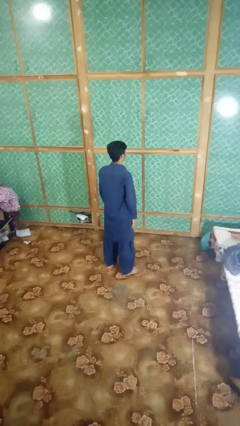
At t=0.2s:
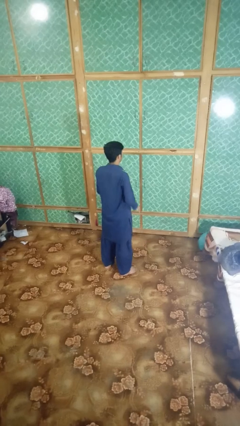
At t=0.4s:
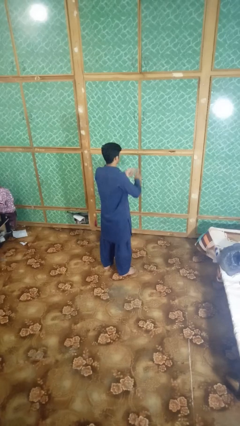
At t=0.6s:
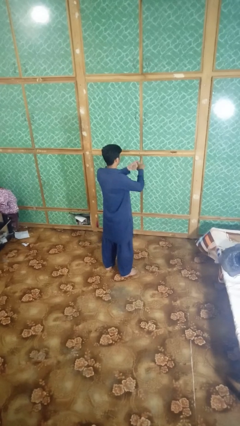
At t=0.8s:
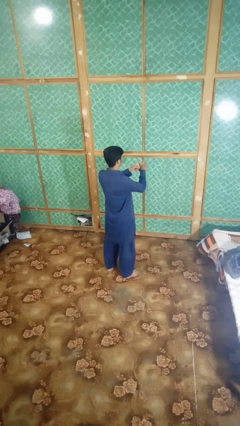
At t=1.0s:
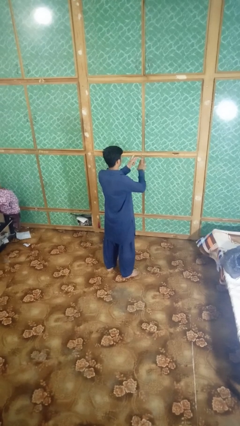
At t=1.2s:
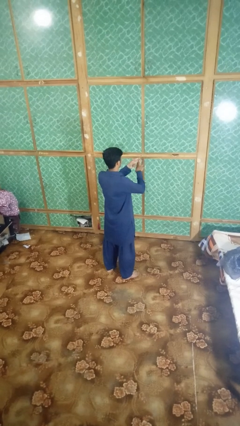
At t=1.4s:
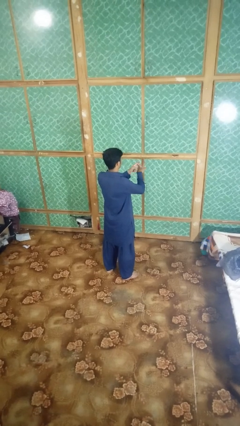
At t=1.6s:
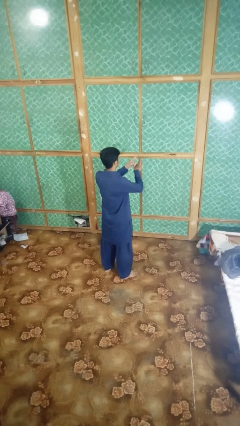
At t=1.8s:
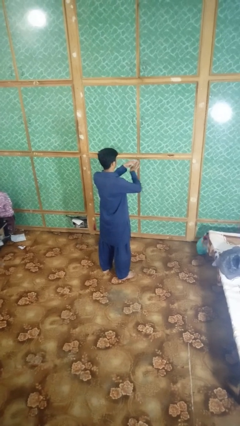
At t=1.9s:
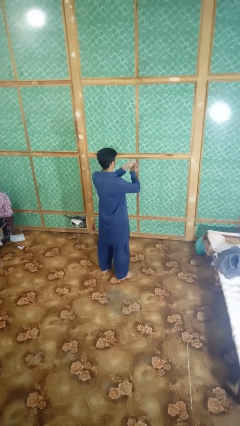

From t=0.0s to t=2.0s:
person snaps fingers

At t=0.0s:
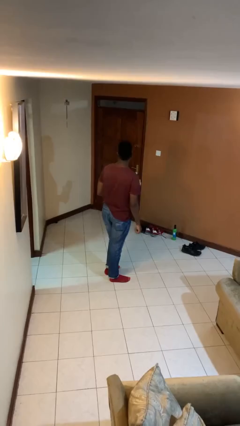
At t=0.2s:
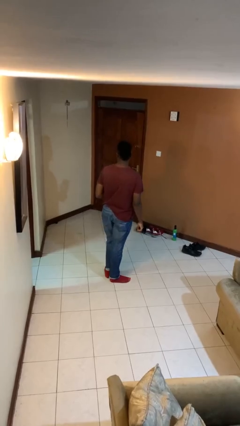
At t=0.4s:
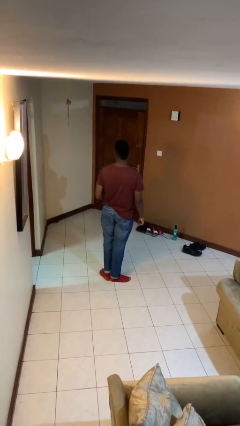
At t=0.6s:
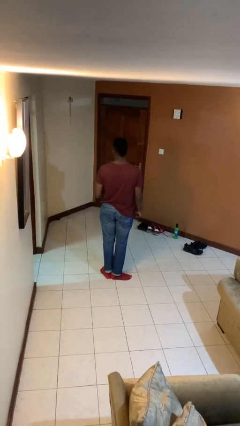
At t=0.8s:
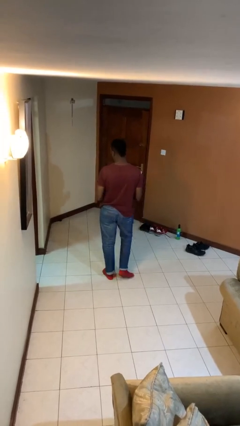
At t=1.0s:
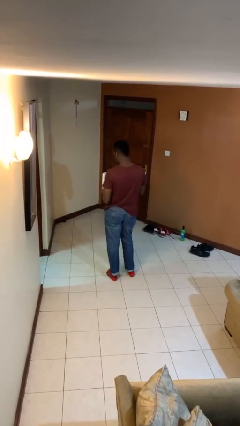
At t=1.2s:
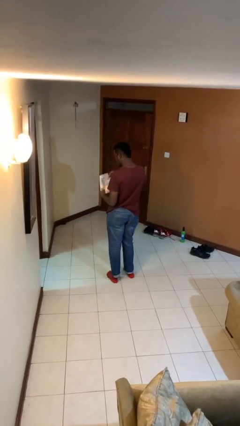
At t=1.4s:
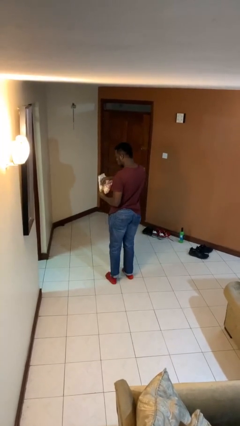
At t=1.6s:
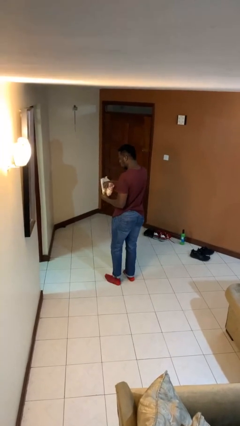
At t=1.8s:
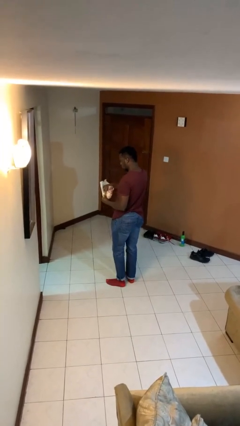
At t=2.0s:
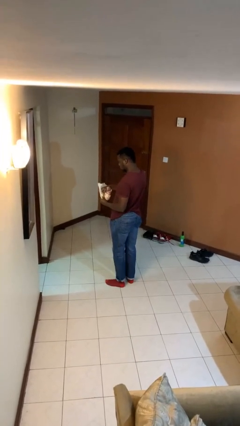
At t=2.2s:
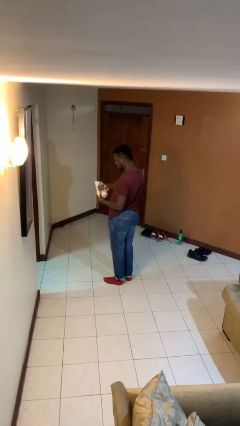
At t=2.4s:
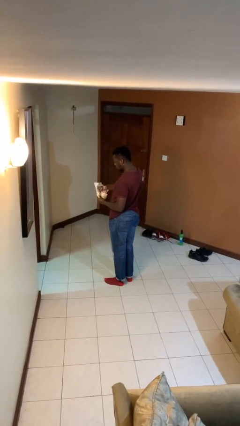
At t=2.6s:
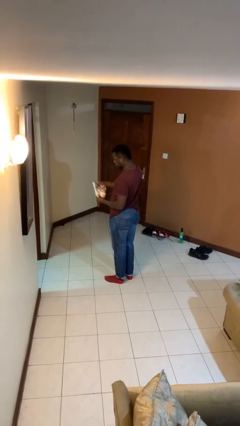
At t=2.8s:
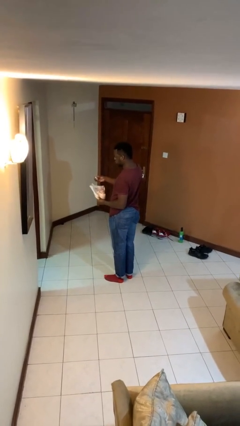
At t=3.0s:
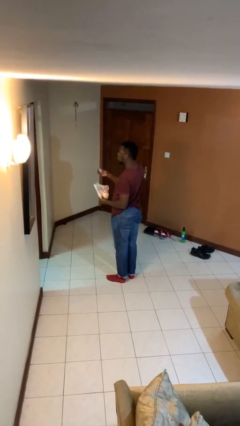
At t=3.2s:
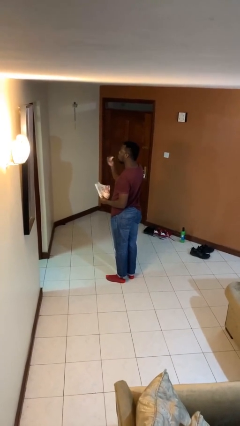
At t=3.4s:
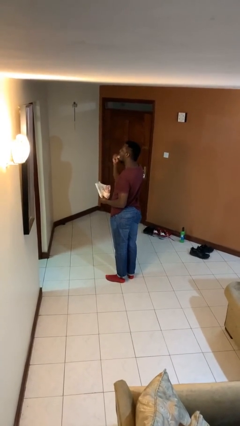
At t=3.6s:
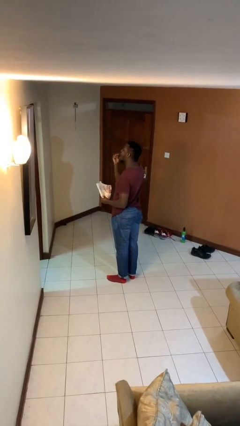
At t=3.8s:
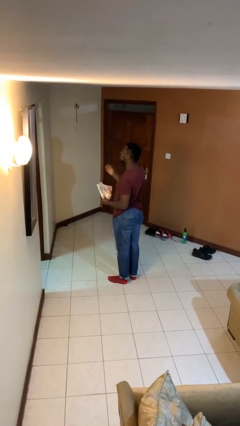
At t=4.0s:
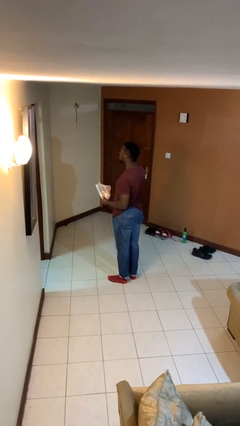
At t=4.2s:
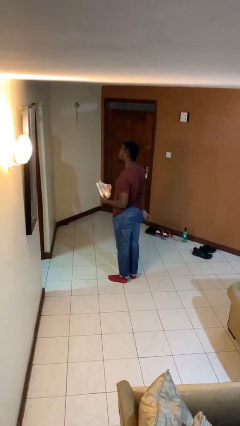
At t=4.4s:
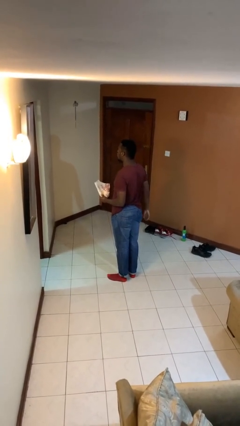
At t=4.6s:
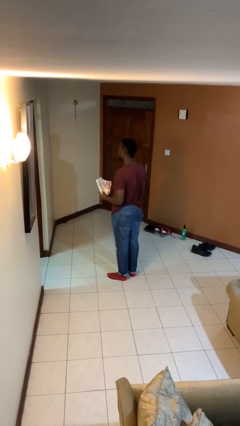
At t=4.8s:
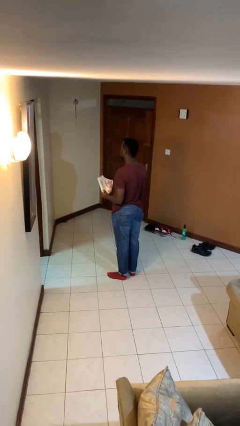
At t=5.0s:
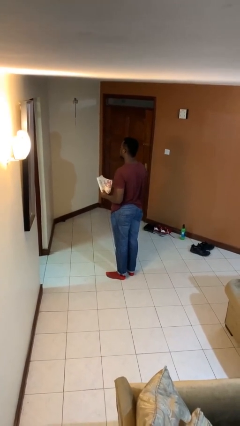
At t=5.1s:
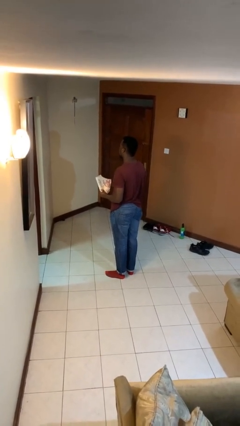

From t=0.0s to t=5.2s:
person eats snack from bag

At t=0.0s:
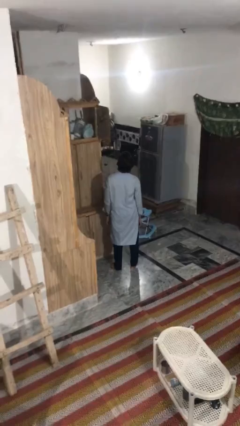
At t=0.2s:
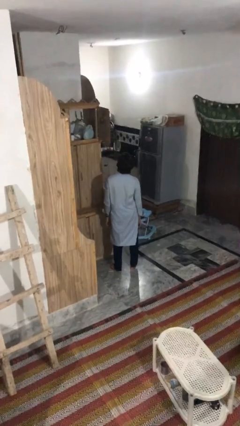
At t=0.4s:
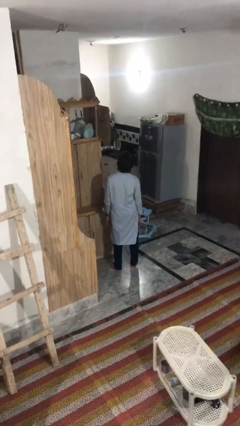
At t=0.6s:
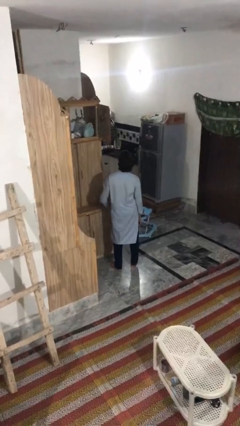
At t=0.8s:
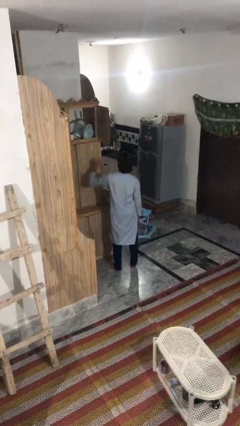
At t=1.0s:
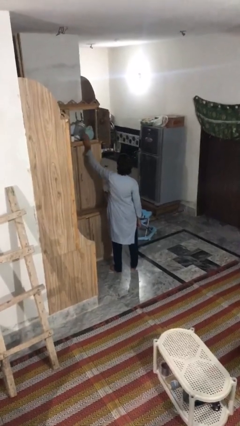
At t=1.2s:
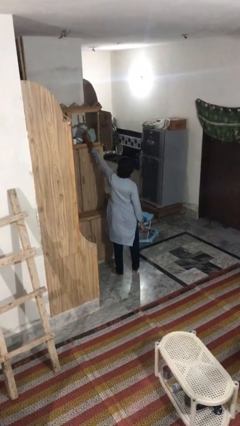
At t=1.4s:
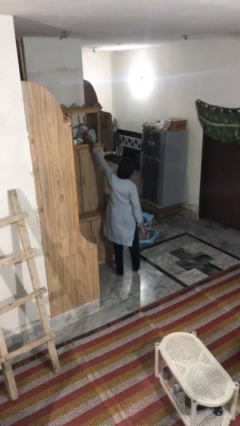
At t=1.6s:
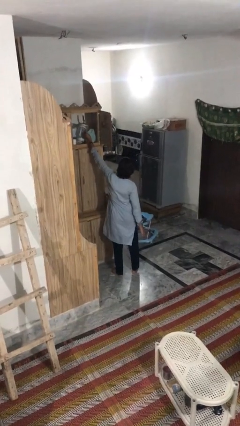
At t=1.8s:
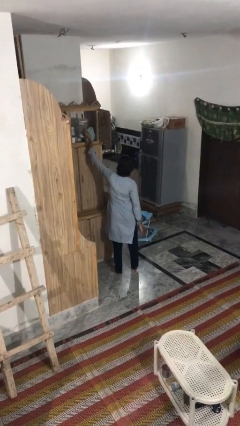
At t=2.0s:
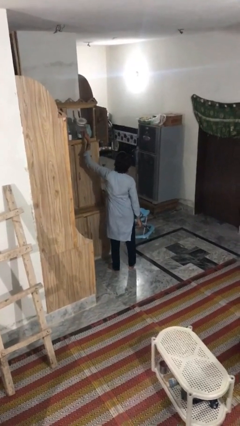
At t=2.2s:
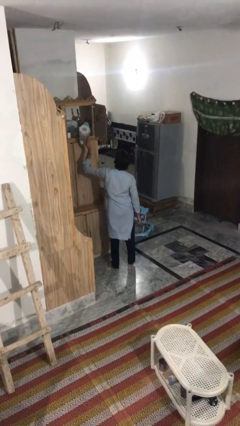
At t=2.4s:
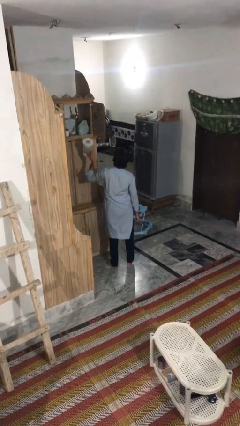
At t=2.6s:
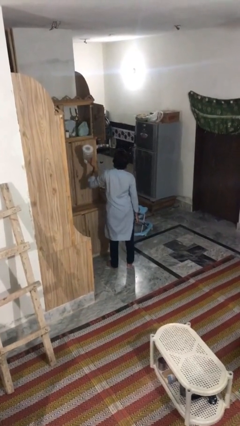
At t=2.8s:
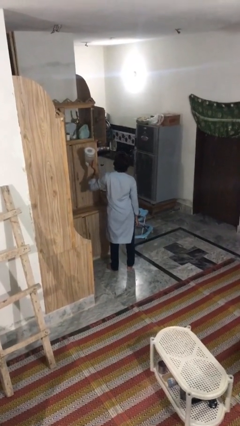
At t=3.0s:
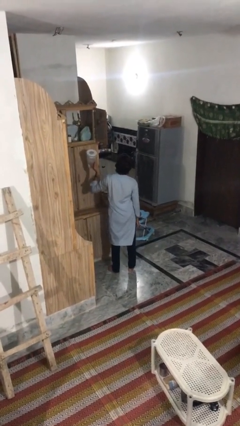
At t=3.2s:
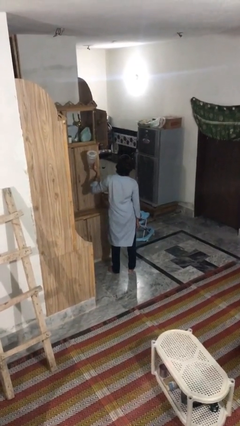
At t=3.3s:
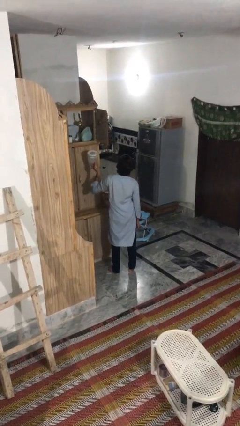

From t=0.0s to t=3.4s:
person picks up object from shelf

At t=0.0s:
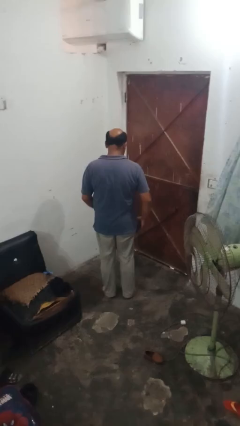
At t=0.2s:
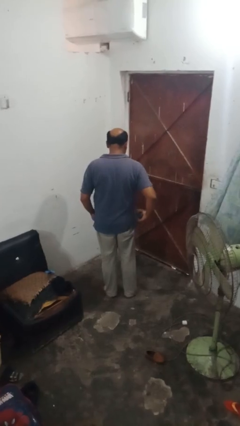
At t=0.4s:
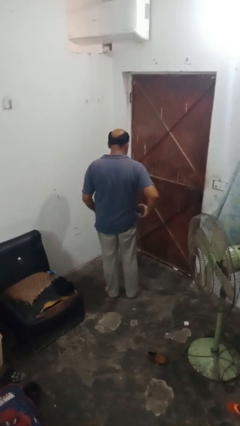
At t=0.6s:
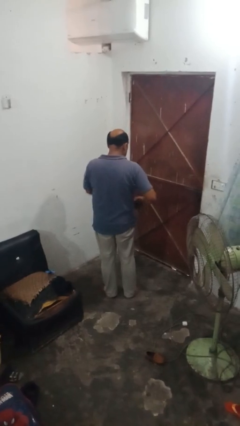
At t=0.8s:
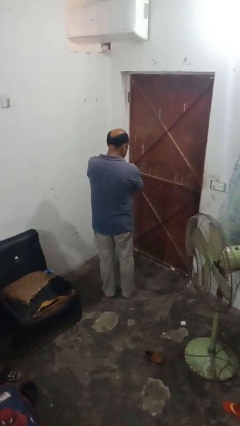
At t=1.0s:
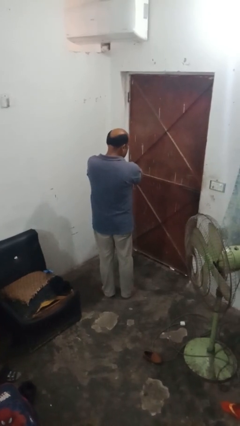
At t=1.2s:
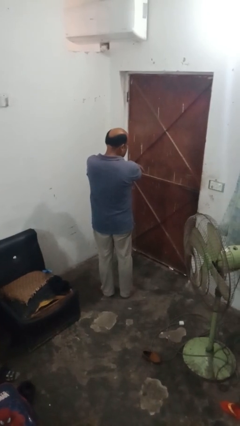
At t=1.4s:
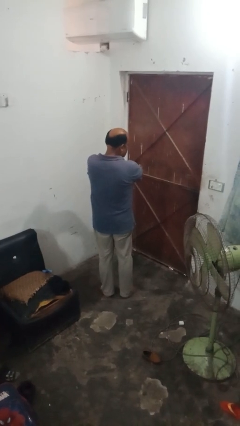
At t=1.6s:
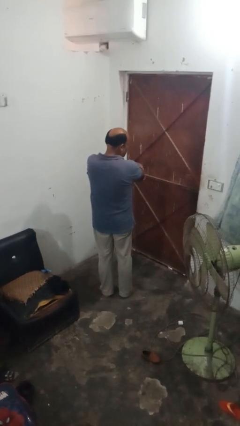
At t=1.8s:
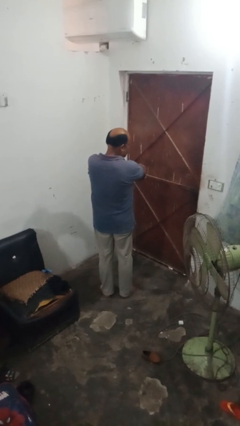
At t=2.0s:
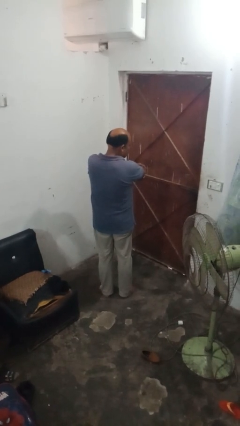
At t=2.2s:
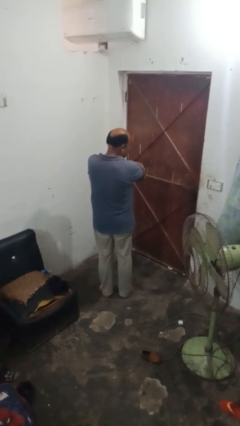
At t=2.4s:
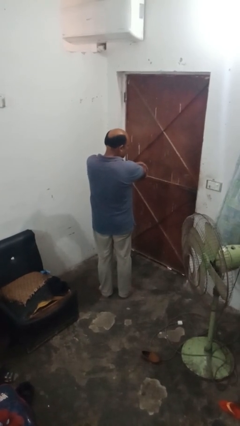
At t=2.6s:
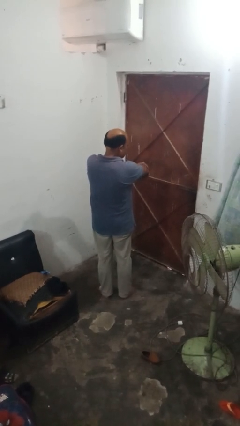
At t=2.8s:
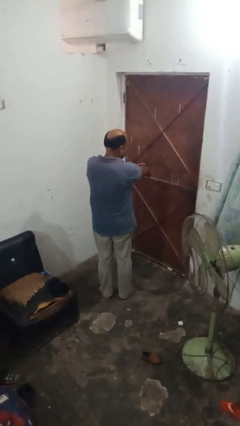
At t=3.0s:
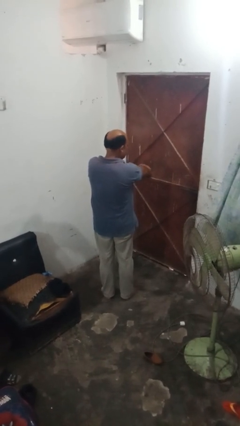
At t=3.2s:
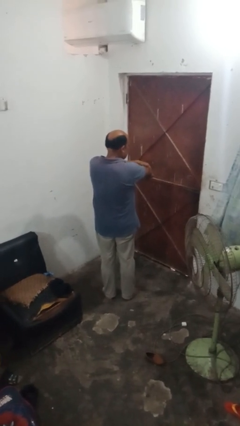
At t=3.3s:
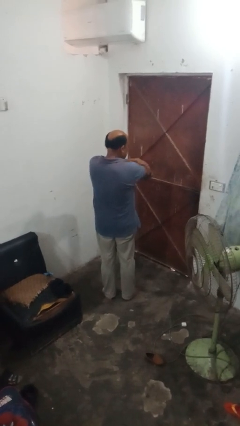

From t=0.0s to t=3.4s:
person applies sunscreen

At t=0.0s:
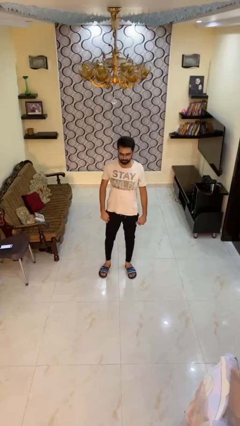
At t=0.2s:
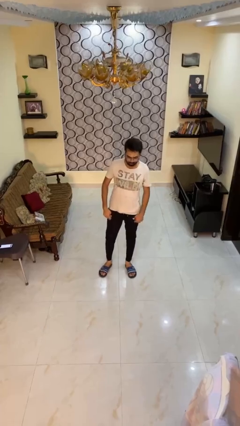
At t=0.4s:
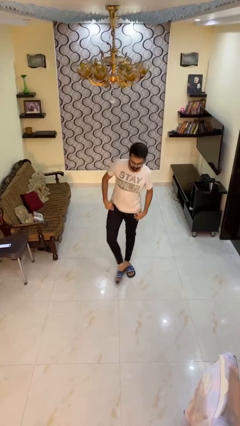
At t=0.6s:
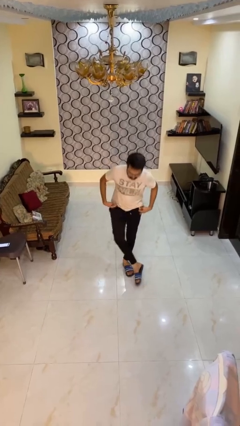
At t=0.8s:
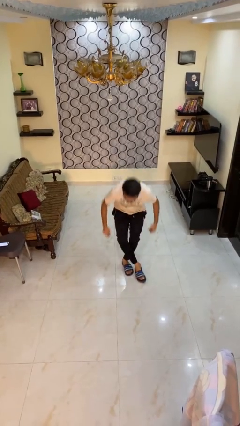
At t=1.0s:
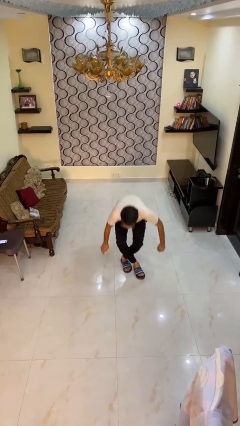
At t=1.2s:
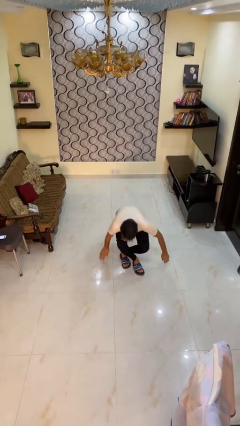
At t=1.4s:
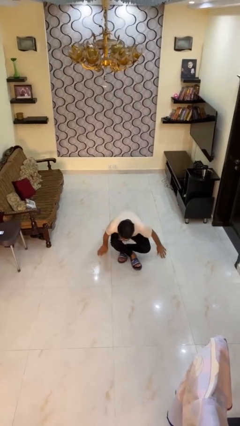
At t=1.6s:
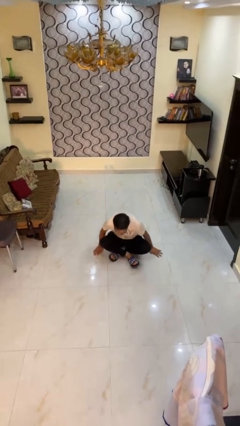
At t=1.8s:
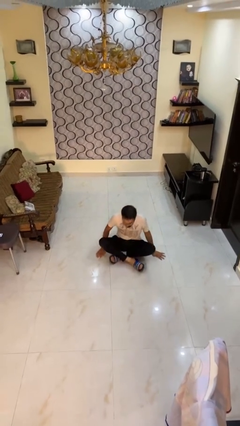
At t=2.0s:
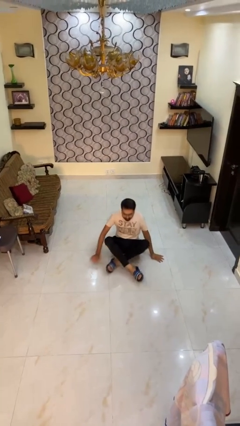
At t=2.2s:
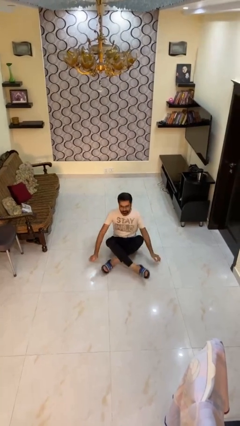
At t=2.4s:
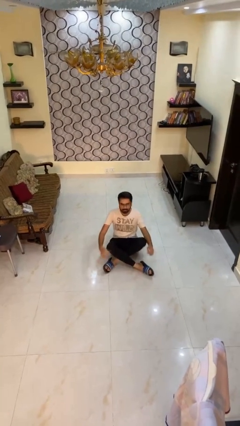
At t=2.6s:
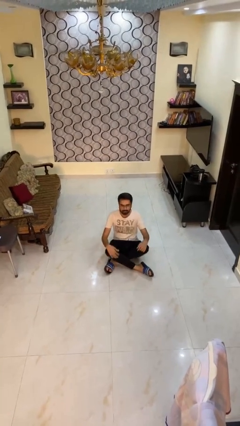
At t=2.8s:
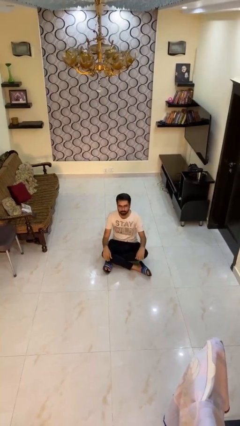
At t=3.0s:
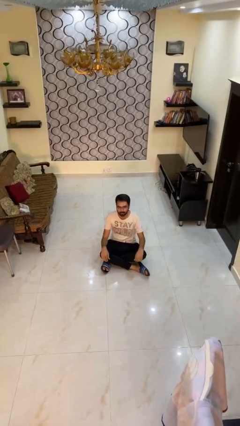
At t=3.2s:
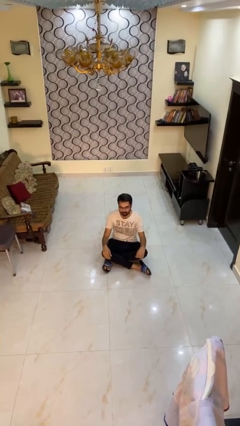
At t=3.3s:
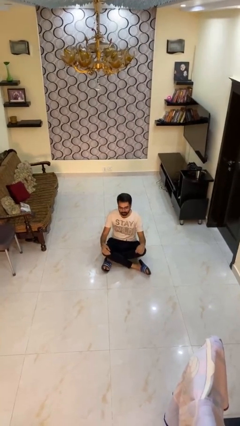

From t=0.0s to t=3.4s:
person sits crisscross
